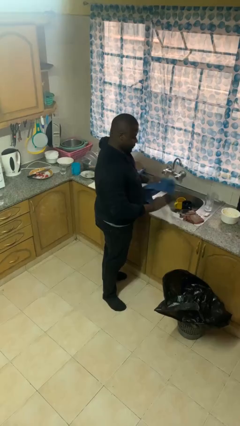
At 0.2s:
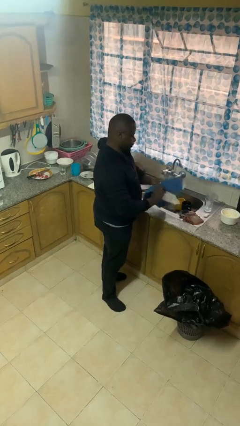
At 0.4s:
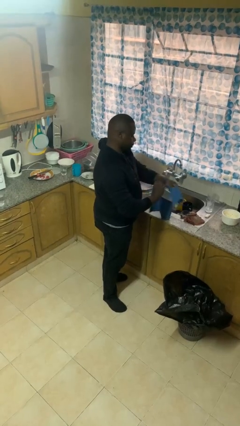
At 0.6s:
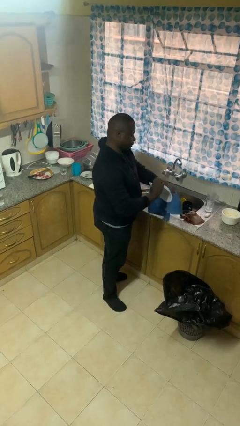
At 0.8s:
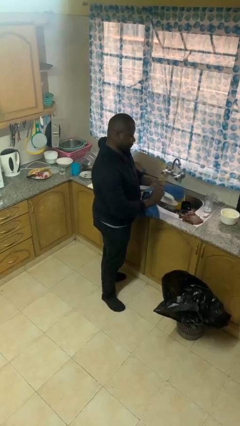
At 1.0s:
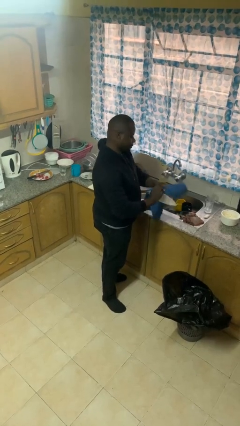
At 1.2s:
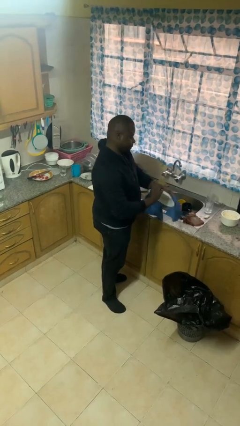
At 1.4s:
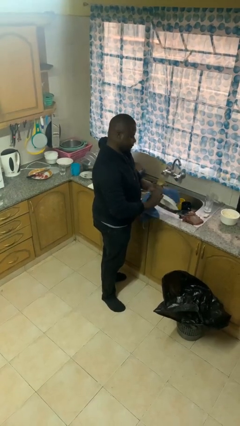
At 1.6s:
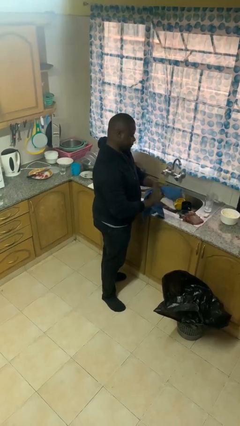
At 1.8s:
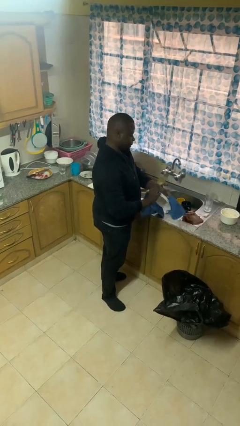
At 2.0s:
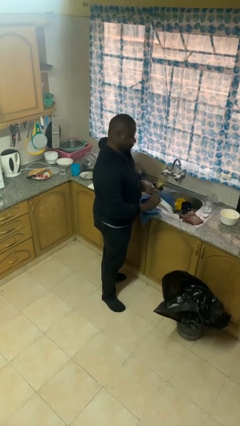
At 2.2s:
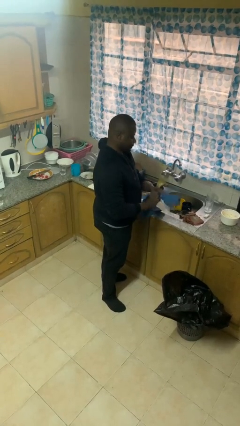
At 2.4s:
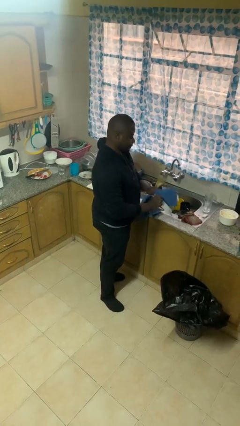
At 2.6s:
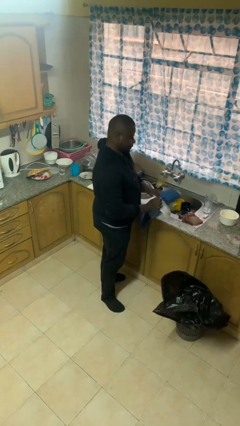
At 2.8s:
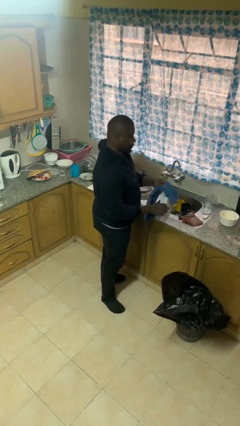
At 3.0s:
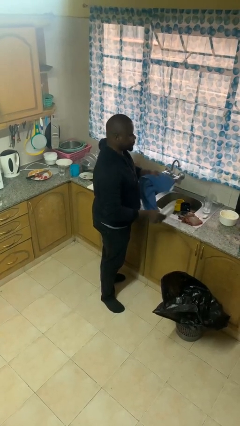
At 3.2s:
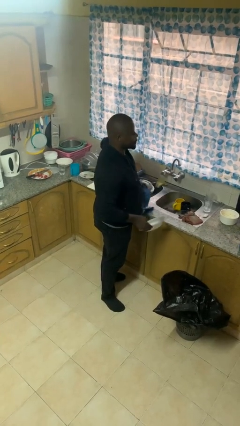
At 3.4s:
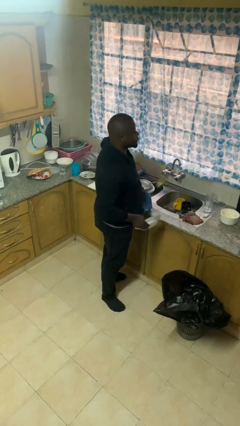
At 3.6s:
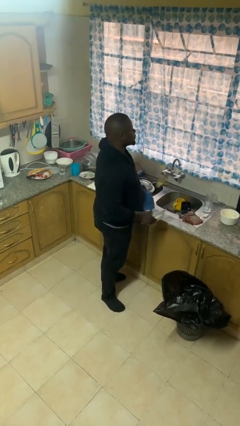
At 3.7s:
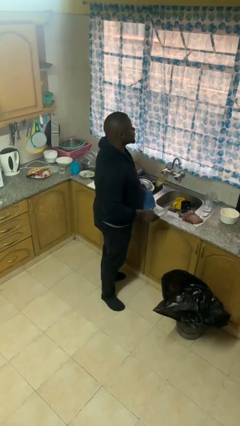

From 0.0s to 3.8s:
person dries dish

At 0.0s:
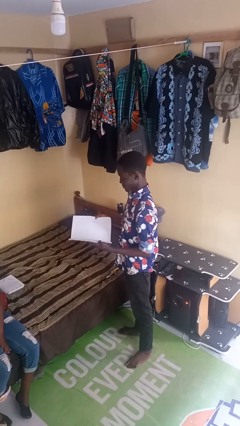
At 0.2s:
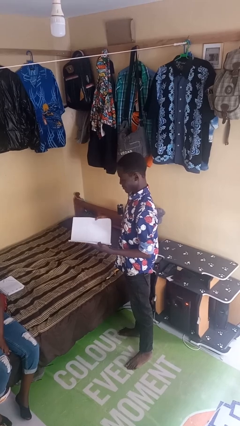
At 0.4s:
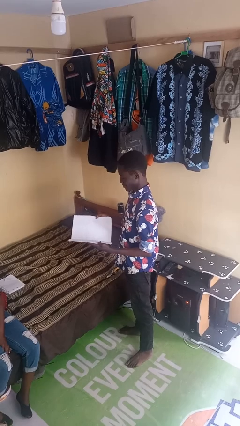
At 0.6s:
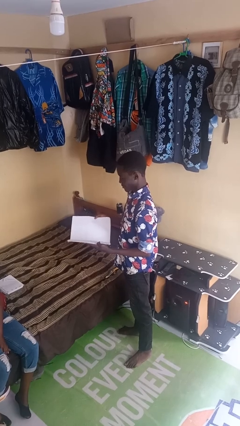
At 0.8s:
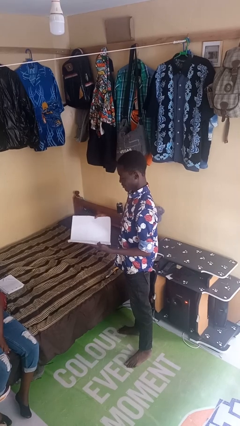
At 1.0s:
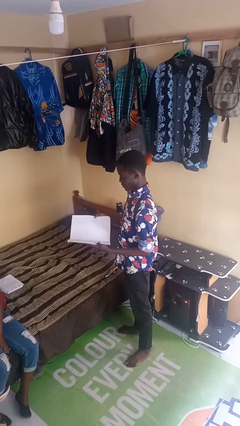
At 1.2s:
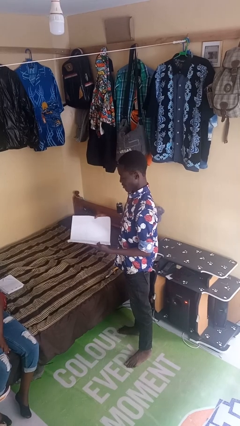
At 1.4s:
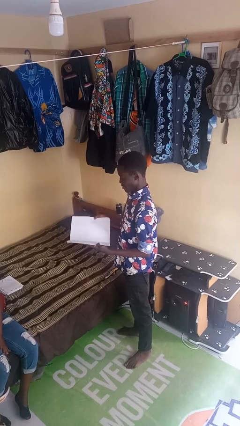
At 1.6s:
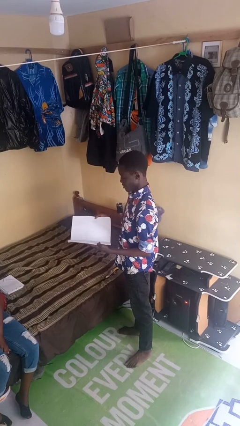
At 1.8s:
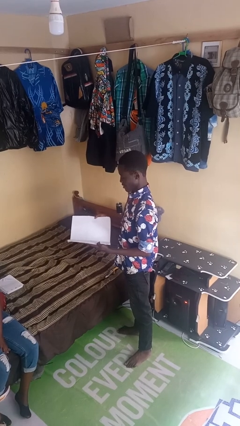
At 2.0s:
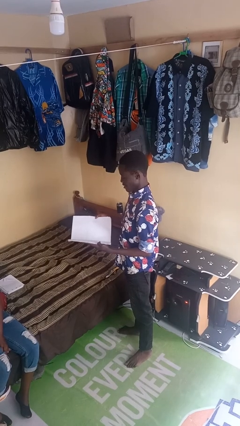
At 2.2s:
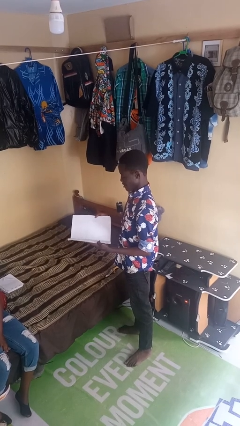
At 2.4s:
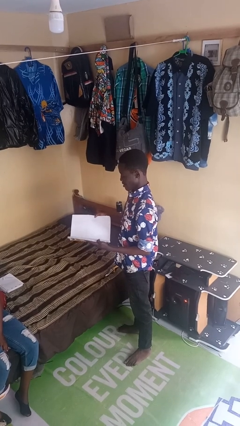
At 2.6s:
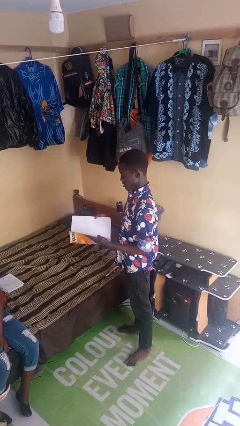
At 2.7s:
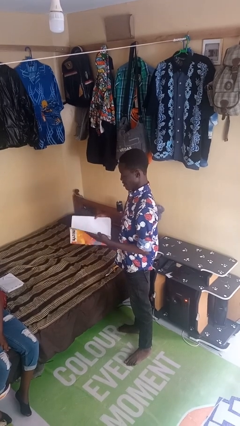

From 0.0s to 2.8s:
person reads newspaper

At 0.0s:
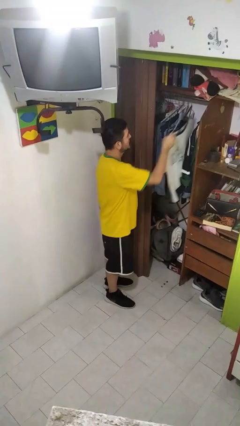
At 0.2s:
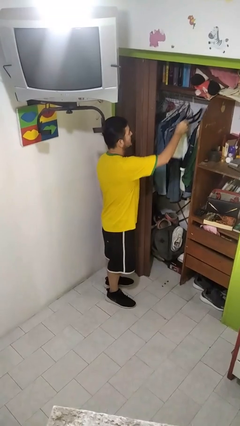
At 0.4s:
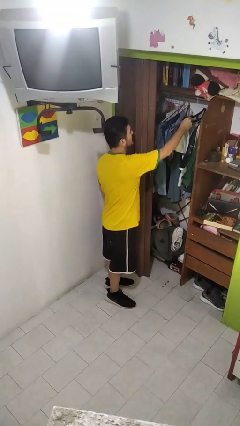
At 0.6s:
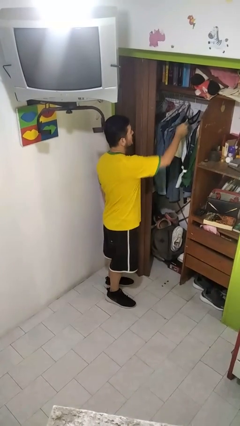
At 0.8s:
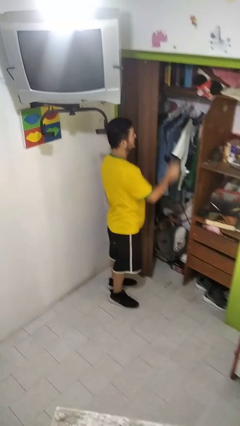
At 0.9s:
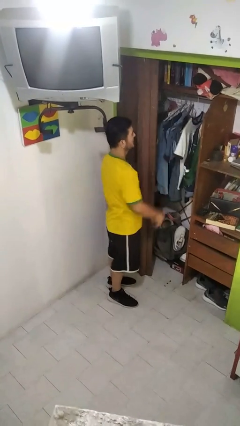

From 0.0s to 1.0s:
person puts clothes into closet

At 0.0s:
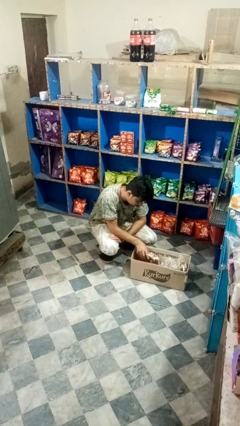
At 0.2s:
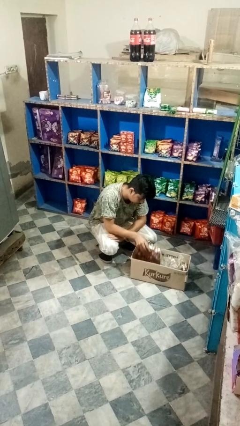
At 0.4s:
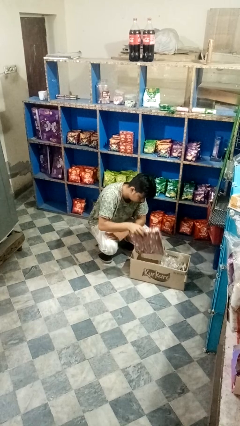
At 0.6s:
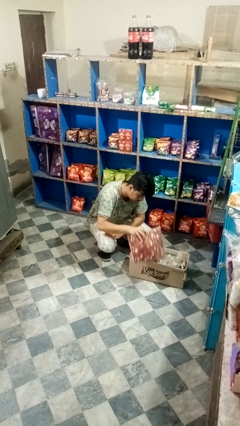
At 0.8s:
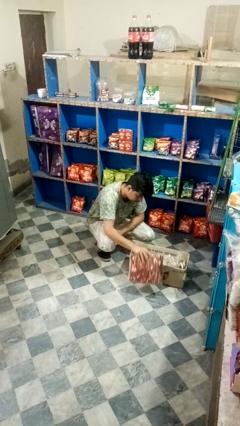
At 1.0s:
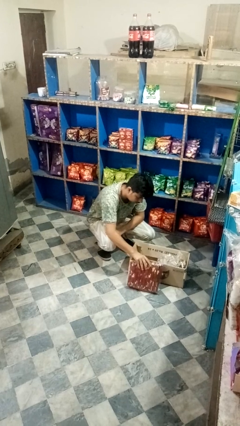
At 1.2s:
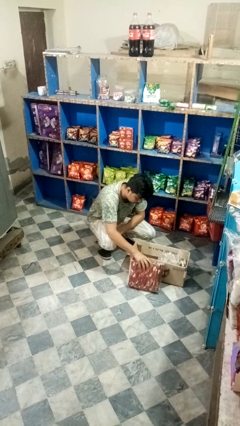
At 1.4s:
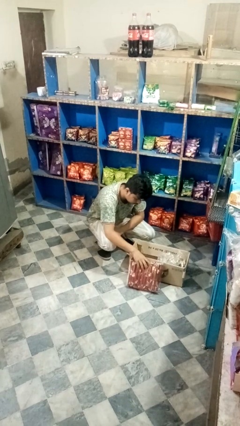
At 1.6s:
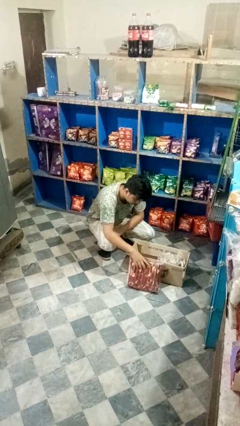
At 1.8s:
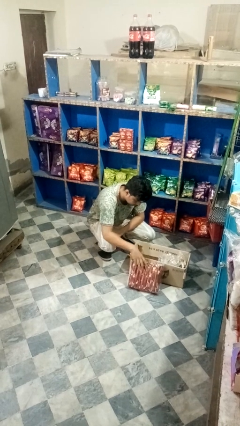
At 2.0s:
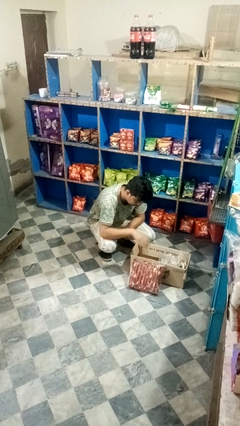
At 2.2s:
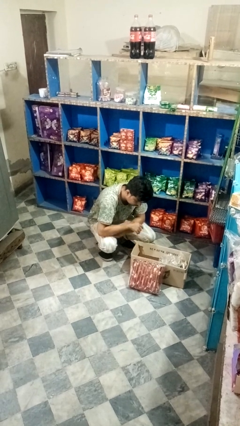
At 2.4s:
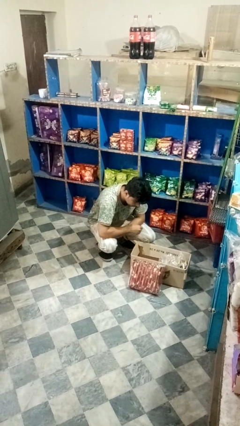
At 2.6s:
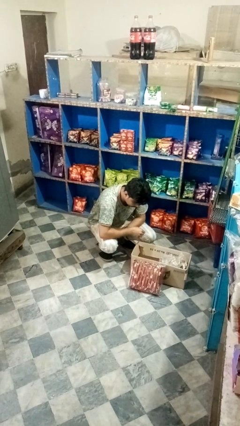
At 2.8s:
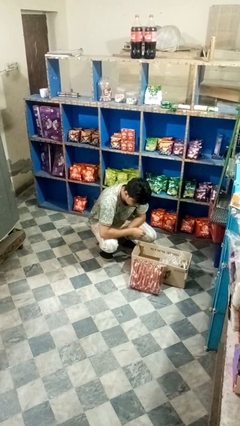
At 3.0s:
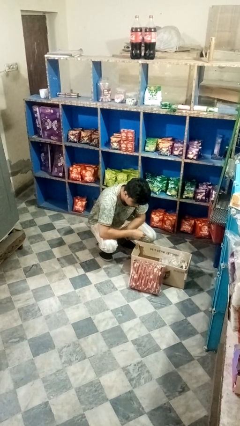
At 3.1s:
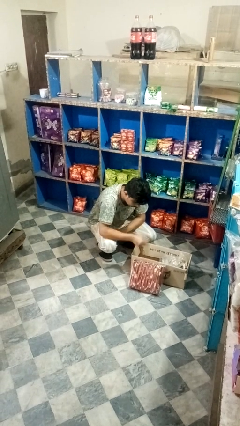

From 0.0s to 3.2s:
person takes object from box

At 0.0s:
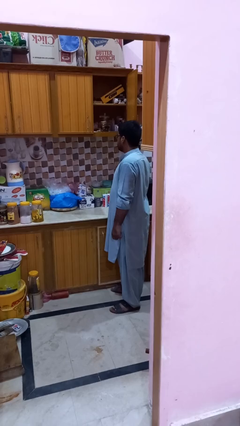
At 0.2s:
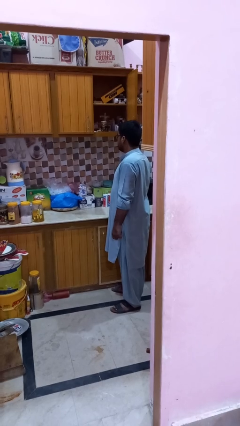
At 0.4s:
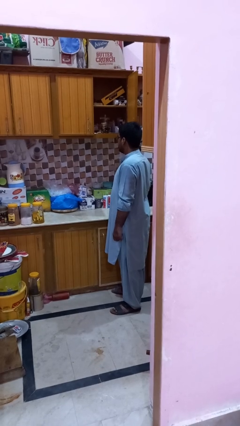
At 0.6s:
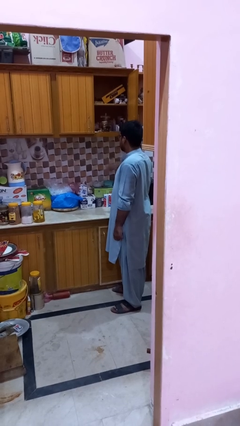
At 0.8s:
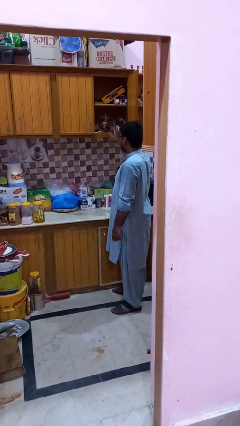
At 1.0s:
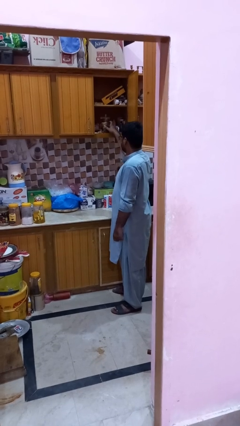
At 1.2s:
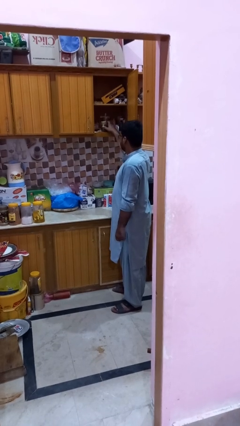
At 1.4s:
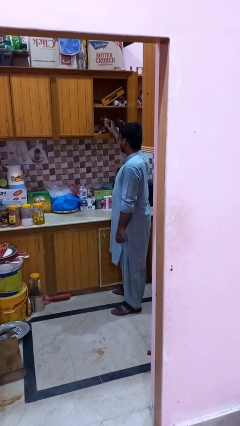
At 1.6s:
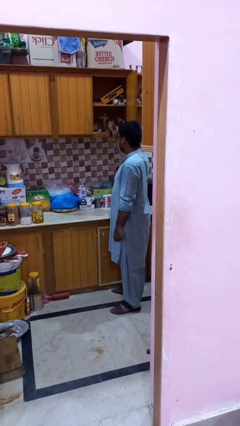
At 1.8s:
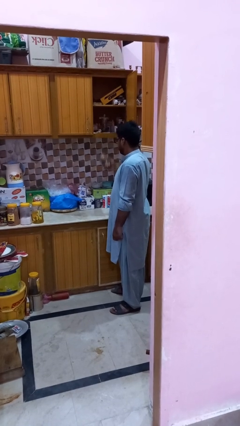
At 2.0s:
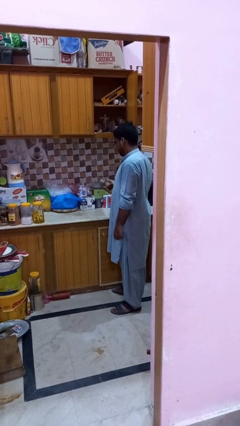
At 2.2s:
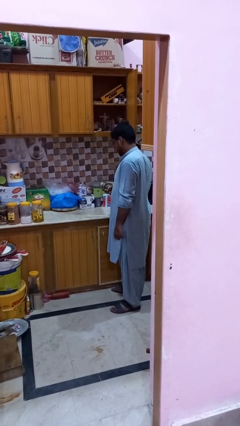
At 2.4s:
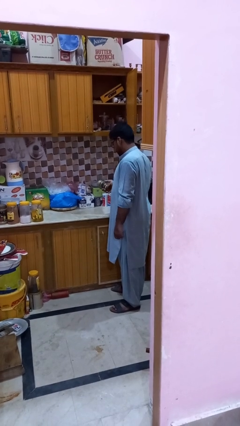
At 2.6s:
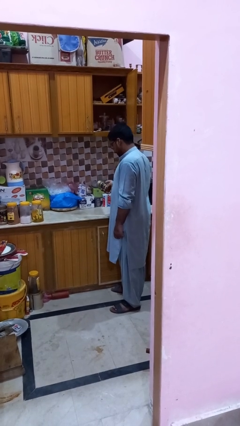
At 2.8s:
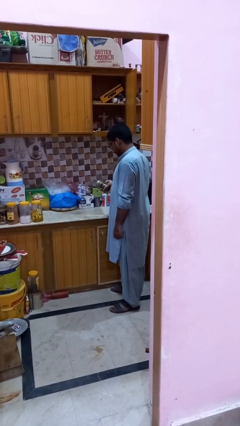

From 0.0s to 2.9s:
person picks up object from cabinet

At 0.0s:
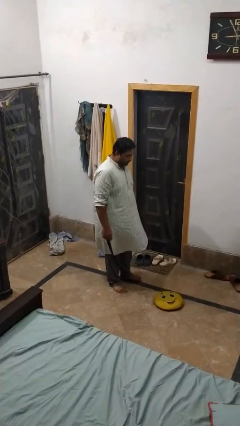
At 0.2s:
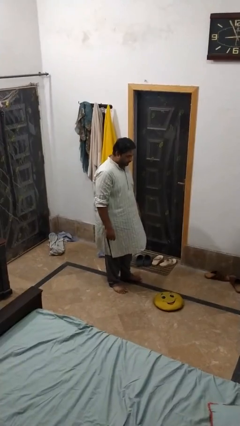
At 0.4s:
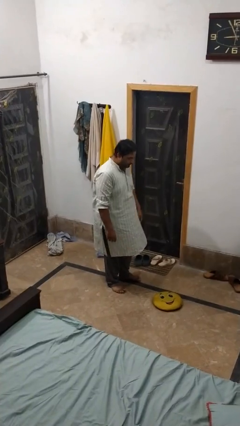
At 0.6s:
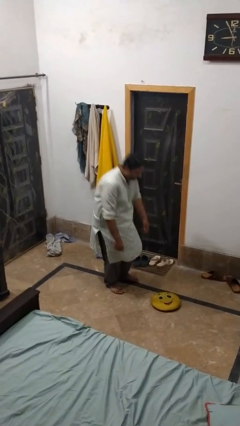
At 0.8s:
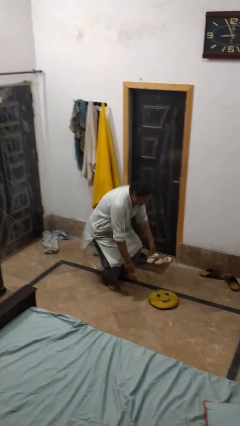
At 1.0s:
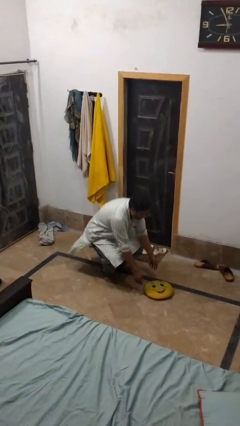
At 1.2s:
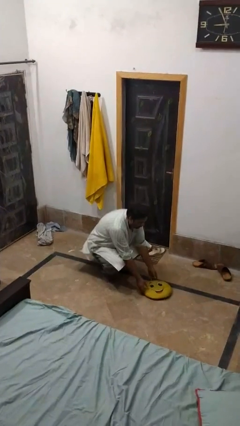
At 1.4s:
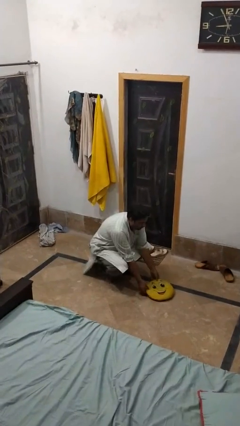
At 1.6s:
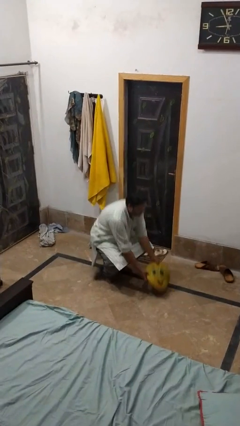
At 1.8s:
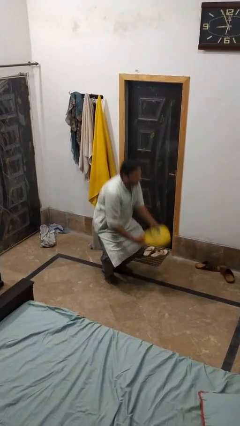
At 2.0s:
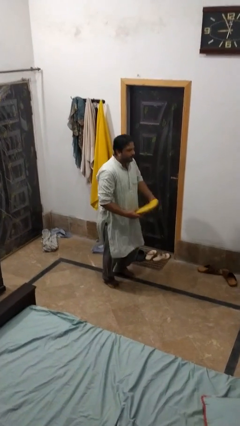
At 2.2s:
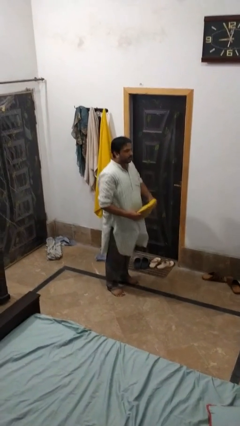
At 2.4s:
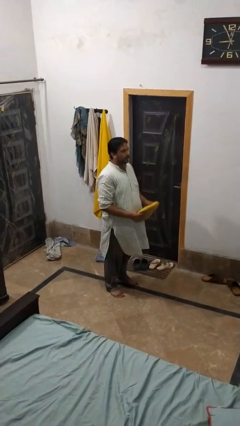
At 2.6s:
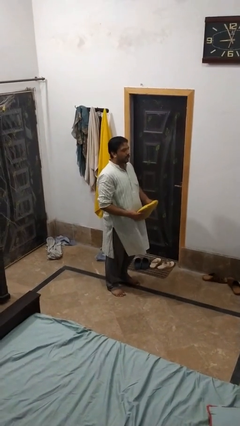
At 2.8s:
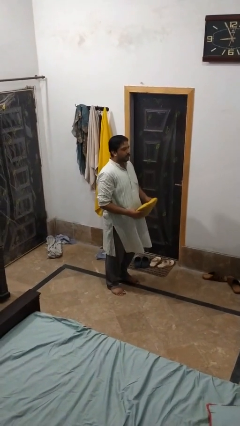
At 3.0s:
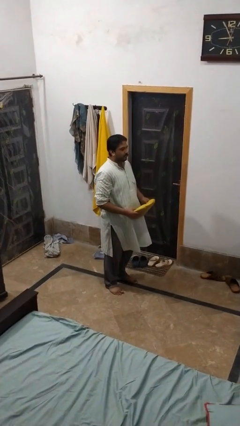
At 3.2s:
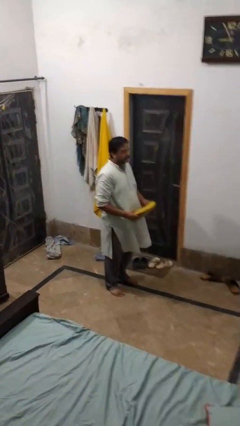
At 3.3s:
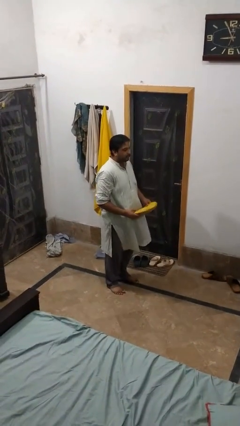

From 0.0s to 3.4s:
person picks up object from floor
